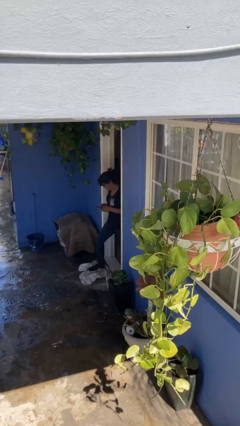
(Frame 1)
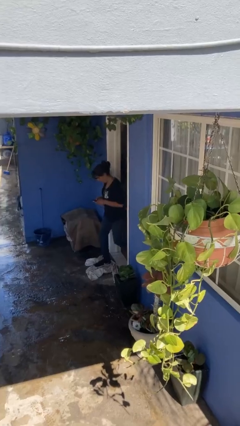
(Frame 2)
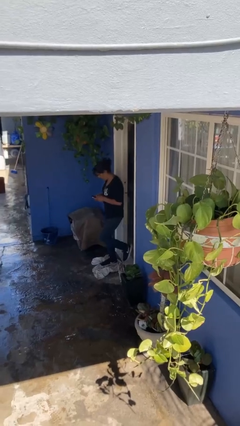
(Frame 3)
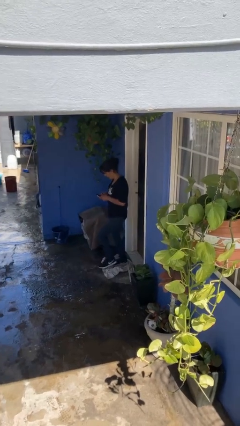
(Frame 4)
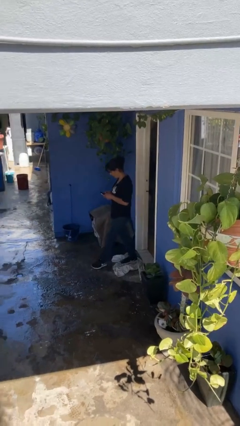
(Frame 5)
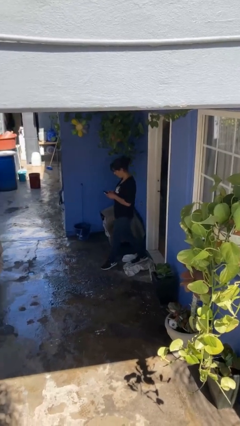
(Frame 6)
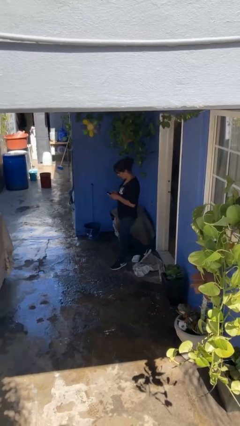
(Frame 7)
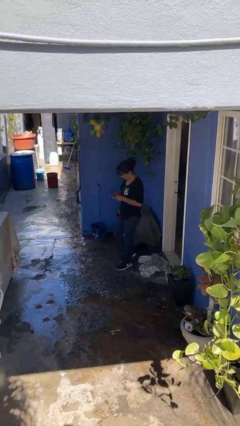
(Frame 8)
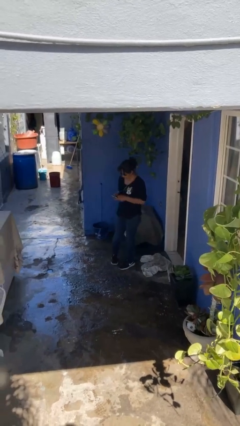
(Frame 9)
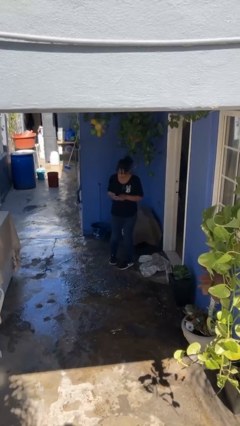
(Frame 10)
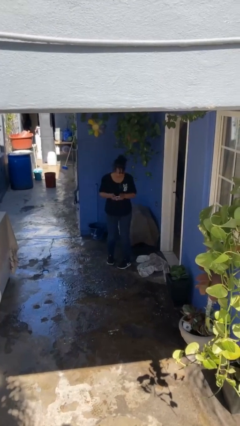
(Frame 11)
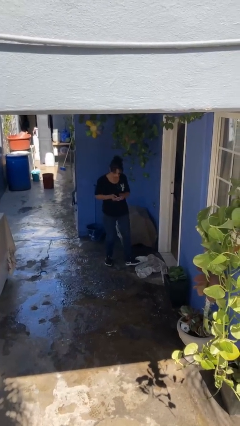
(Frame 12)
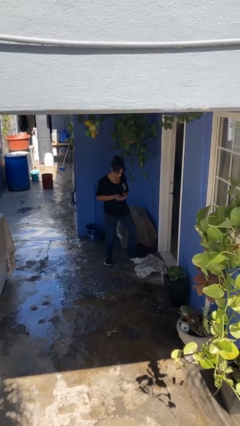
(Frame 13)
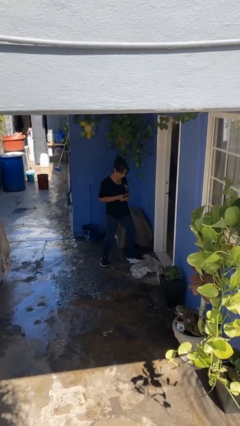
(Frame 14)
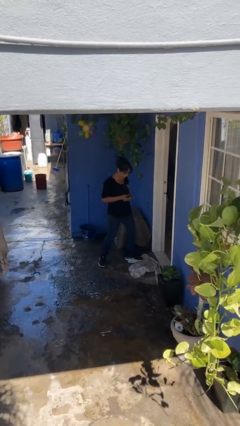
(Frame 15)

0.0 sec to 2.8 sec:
person enters scene through structure

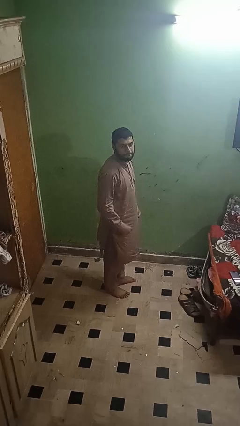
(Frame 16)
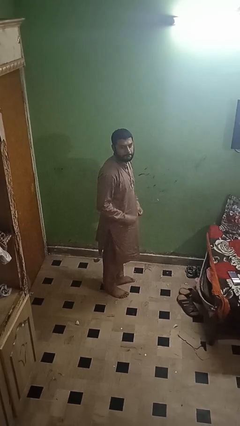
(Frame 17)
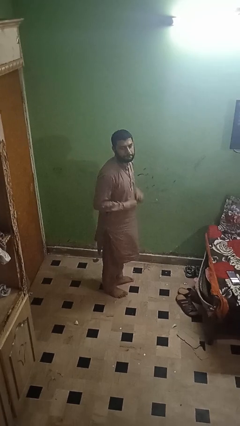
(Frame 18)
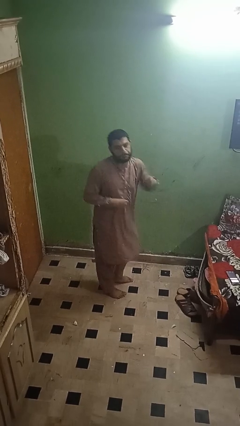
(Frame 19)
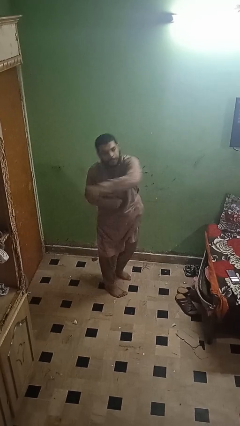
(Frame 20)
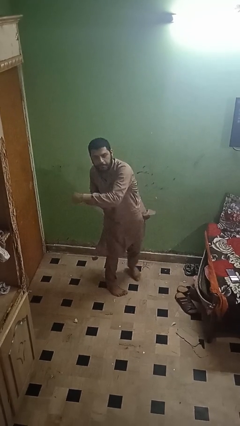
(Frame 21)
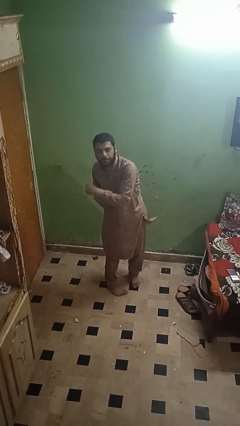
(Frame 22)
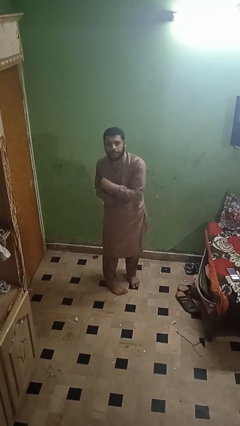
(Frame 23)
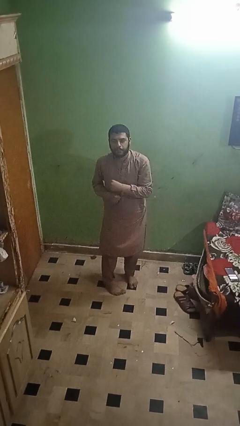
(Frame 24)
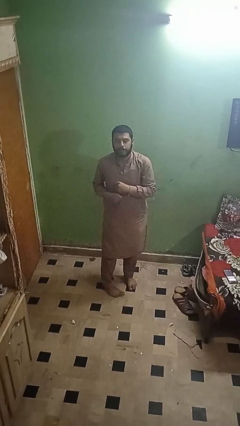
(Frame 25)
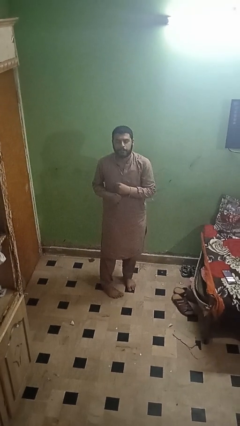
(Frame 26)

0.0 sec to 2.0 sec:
person karate chop

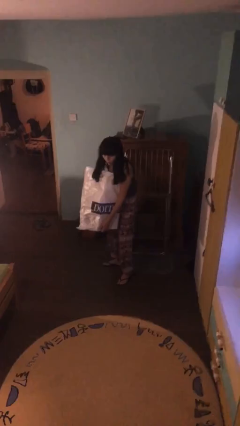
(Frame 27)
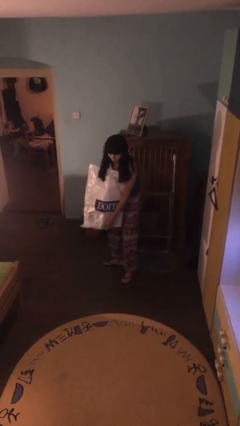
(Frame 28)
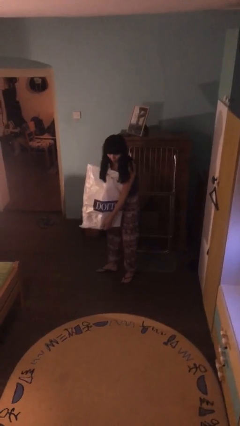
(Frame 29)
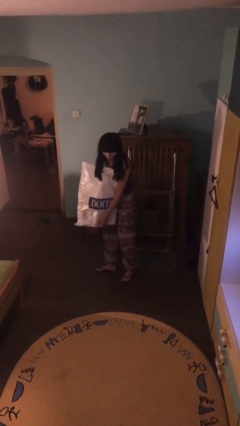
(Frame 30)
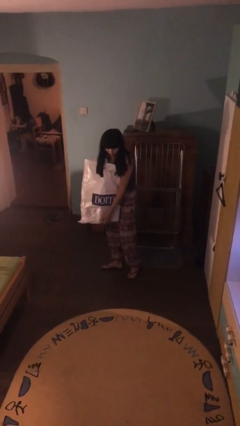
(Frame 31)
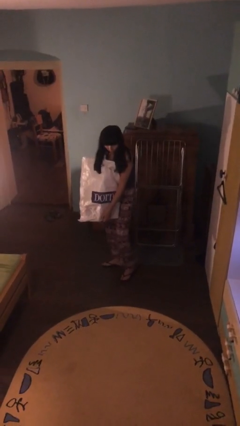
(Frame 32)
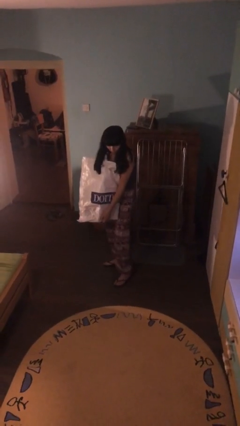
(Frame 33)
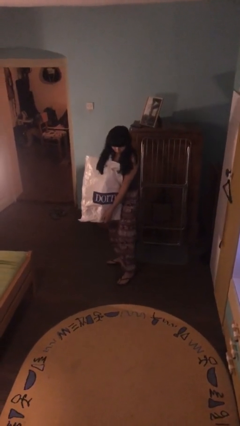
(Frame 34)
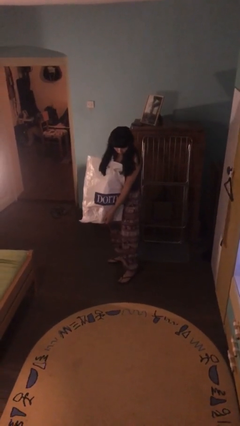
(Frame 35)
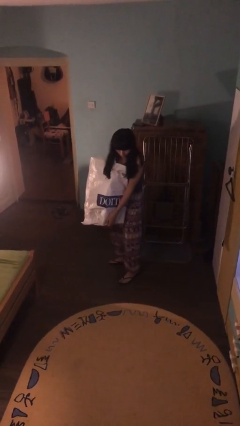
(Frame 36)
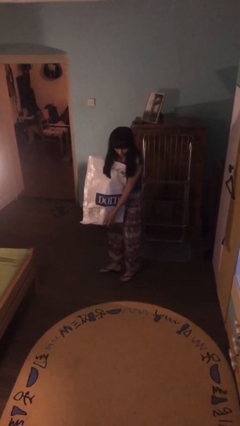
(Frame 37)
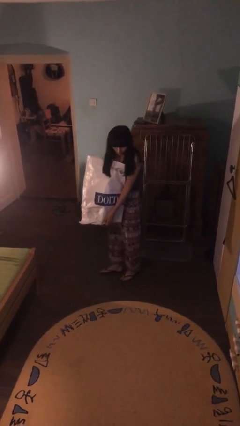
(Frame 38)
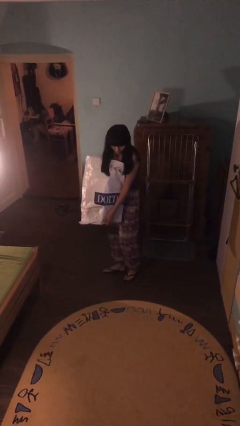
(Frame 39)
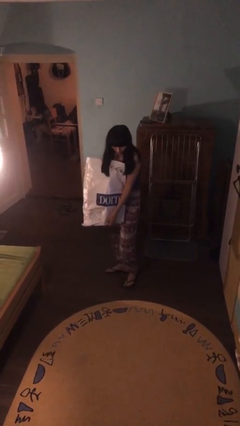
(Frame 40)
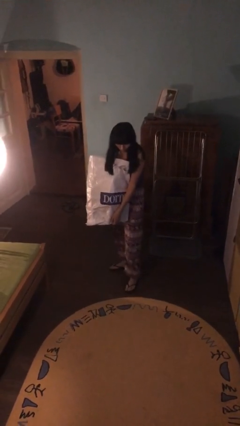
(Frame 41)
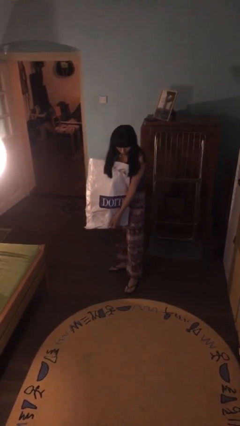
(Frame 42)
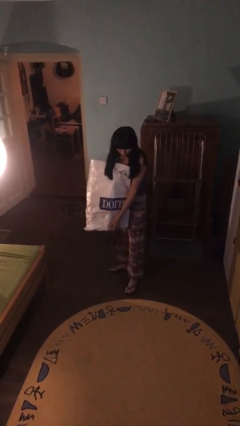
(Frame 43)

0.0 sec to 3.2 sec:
person carries heavy object

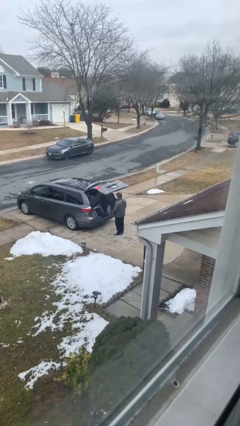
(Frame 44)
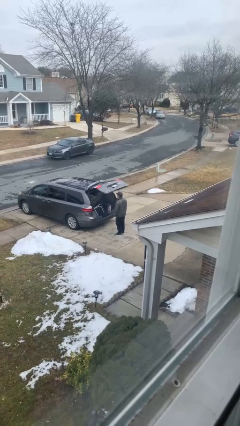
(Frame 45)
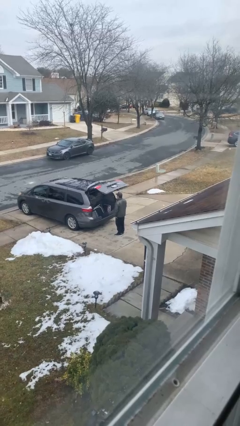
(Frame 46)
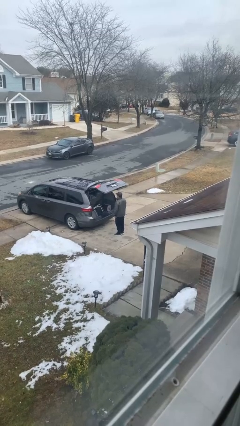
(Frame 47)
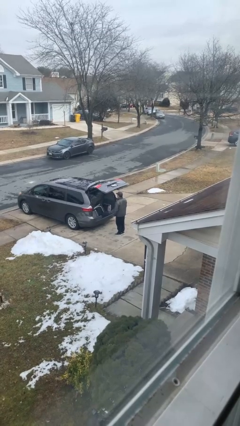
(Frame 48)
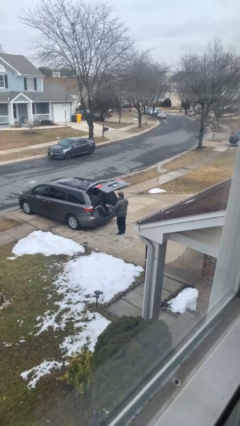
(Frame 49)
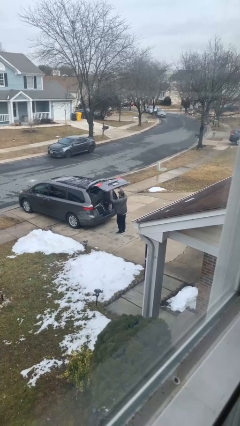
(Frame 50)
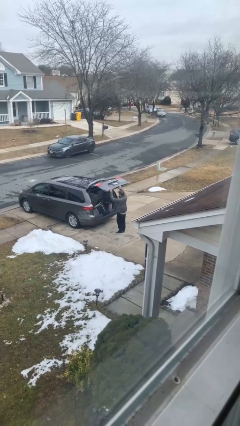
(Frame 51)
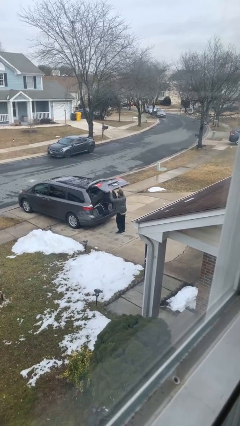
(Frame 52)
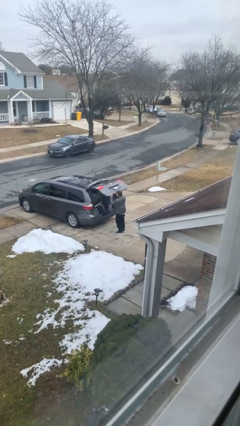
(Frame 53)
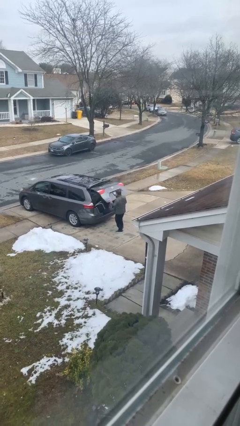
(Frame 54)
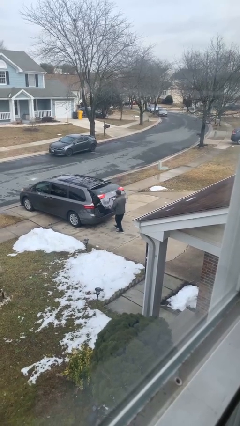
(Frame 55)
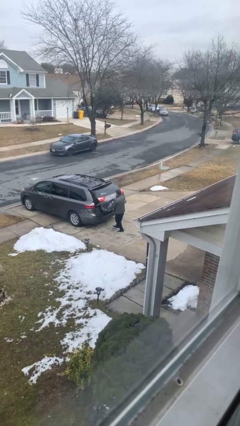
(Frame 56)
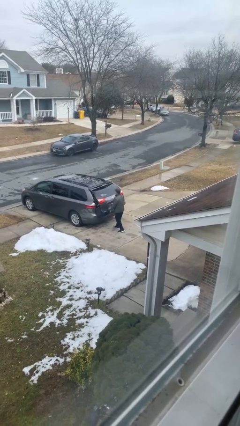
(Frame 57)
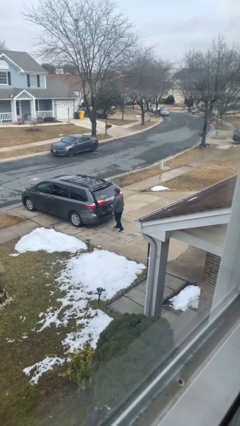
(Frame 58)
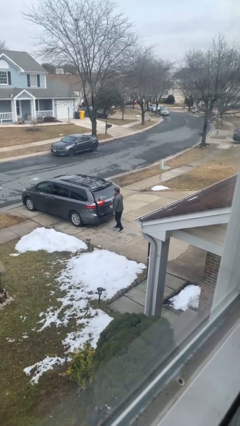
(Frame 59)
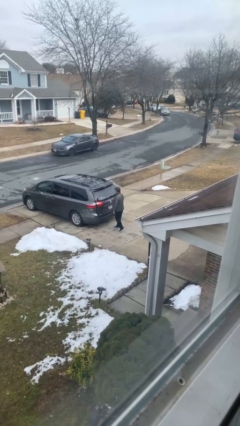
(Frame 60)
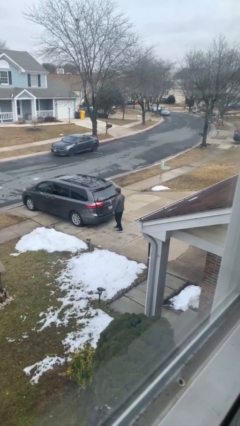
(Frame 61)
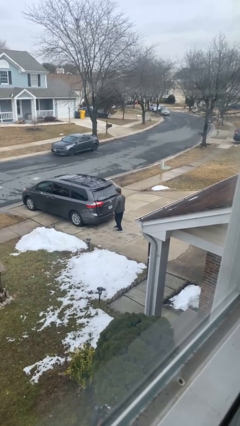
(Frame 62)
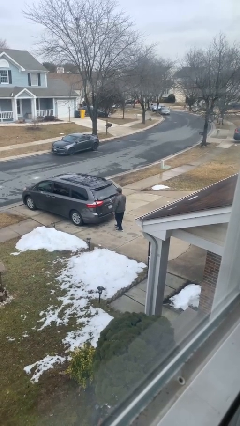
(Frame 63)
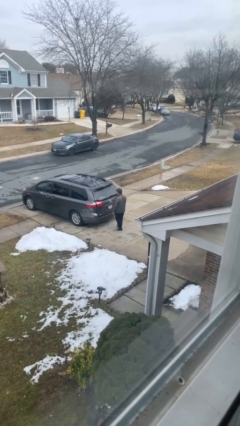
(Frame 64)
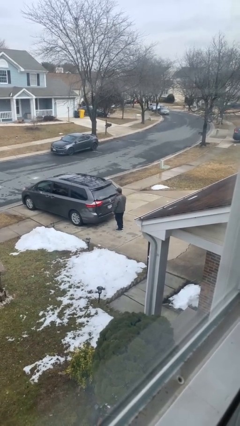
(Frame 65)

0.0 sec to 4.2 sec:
person closes car trunk

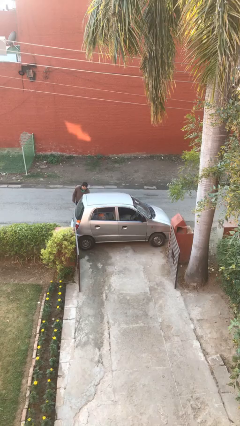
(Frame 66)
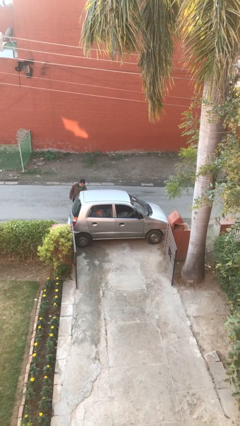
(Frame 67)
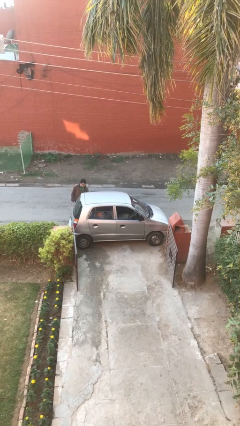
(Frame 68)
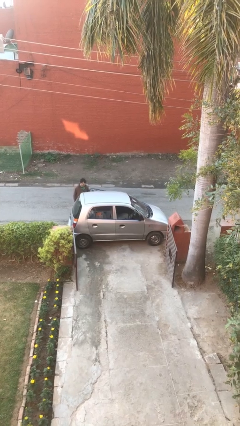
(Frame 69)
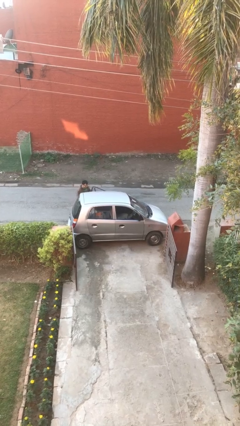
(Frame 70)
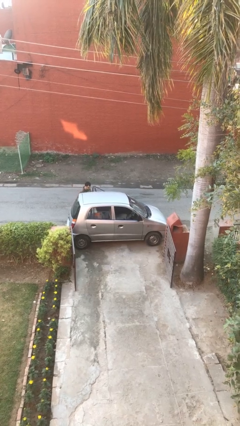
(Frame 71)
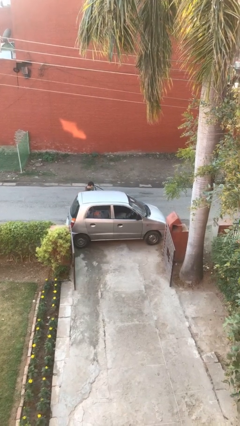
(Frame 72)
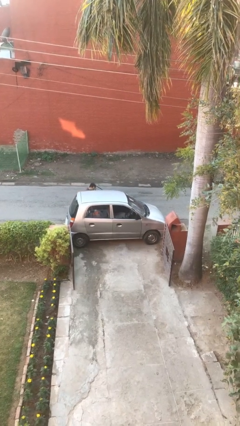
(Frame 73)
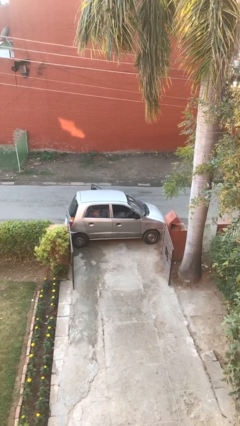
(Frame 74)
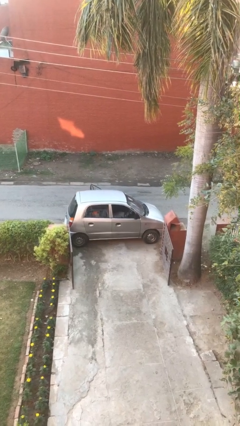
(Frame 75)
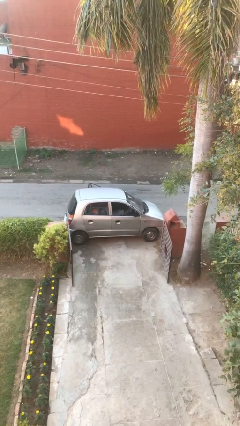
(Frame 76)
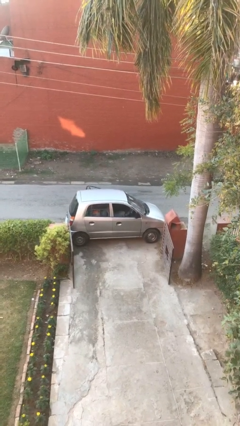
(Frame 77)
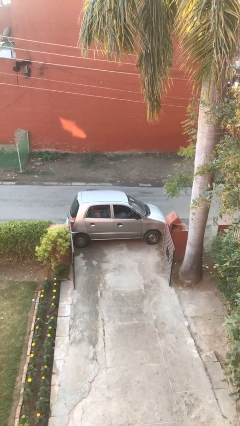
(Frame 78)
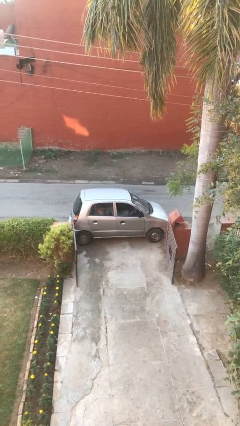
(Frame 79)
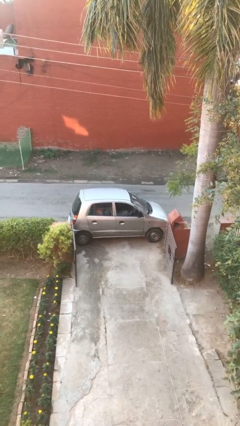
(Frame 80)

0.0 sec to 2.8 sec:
car picks up person

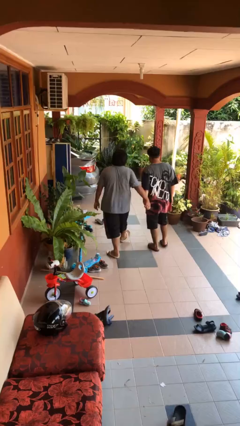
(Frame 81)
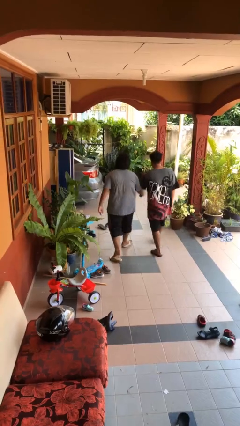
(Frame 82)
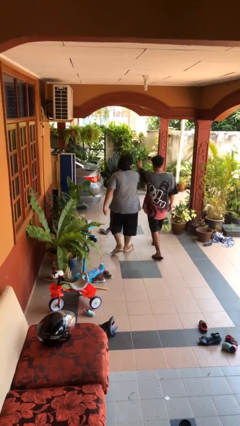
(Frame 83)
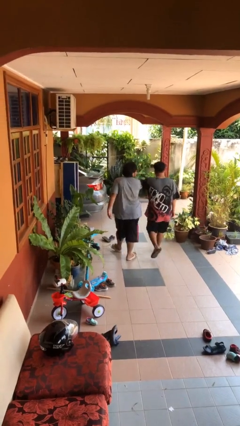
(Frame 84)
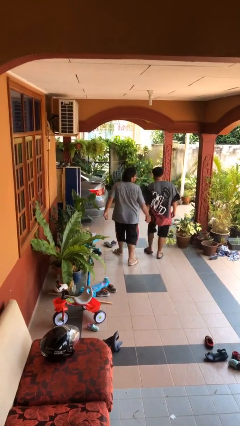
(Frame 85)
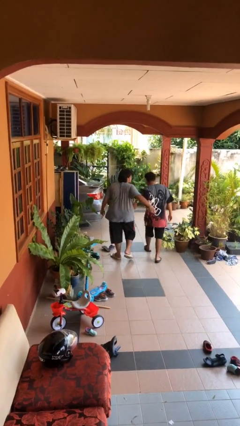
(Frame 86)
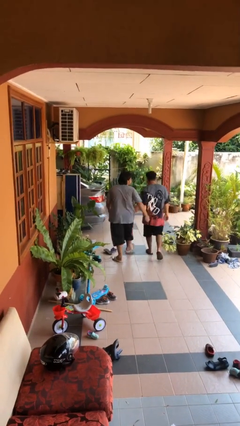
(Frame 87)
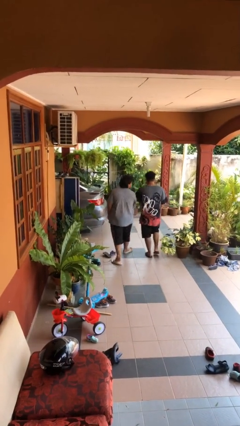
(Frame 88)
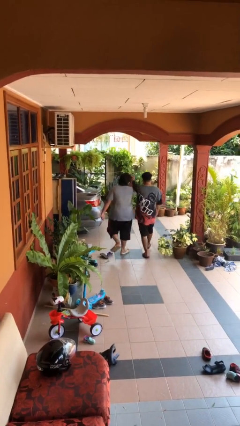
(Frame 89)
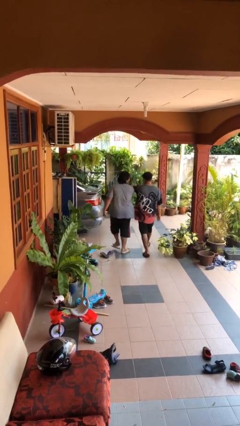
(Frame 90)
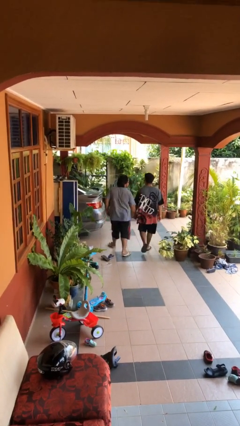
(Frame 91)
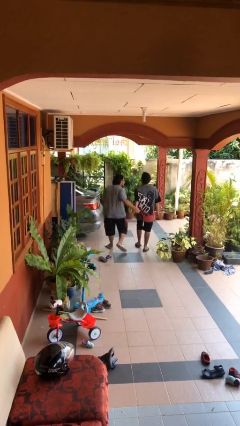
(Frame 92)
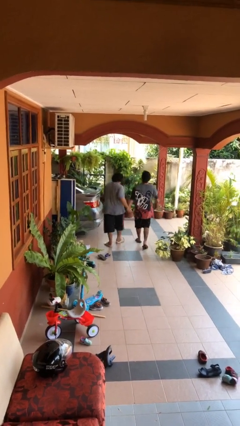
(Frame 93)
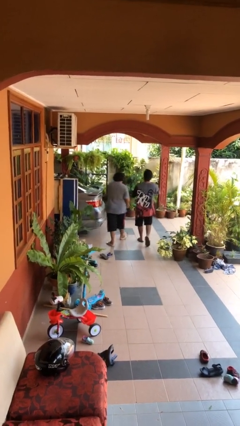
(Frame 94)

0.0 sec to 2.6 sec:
person holds hand
